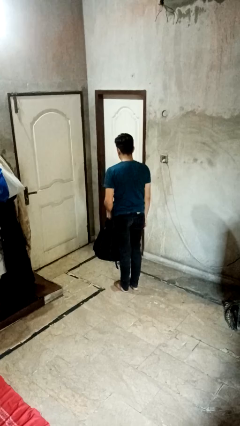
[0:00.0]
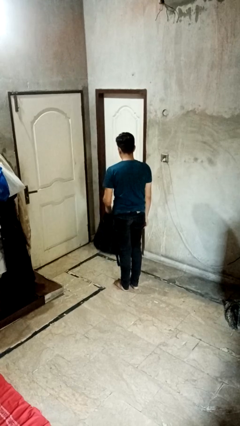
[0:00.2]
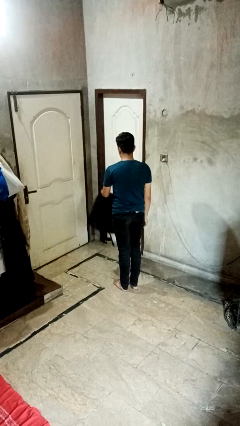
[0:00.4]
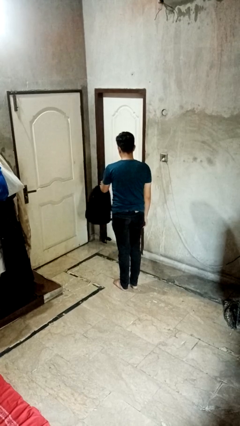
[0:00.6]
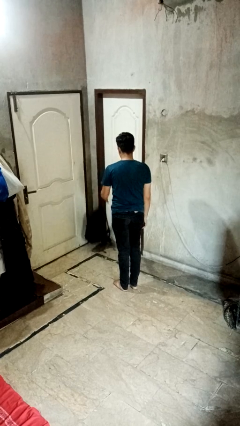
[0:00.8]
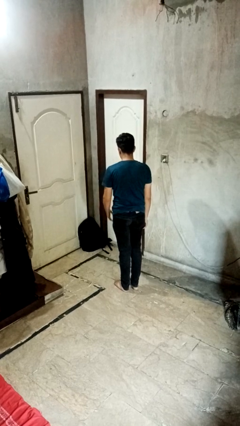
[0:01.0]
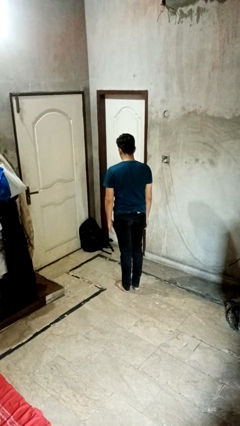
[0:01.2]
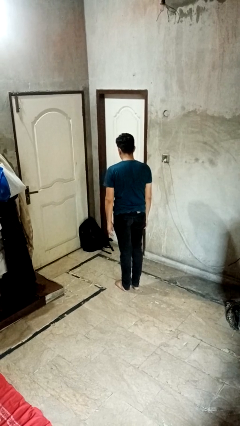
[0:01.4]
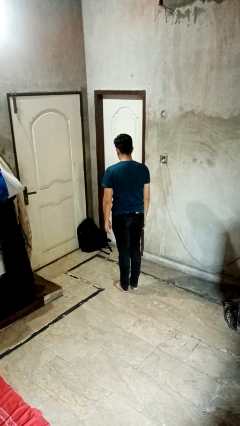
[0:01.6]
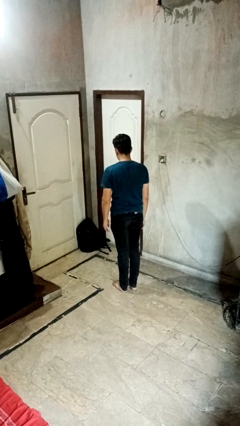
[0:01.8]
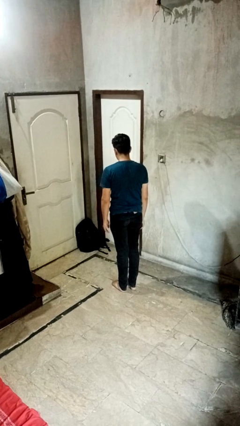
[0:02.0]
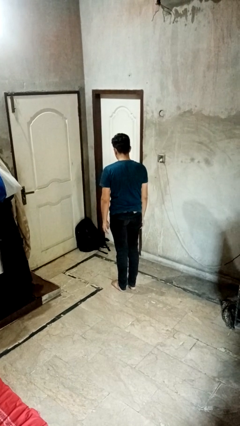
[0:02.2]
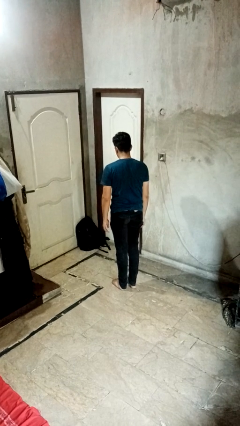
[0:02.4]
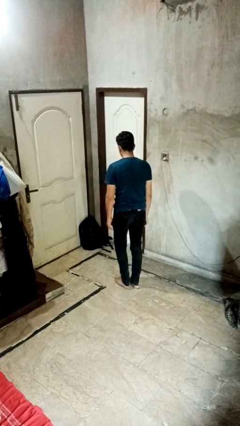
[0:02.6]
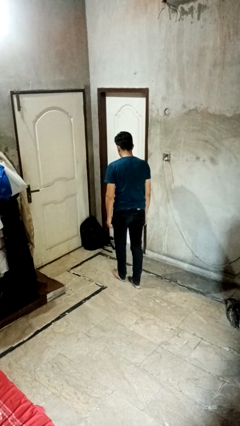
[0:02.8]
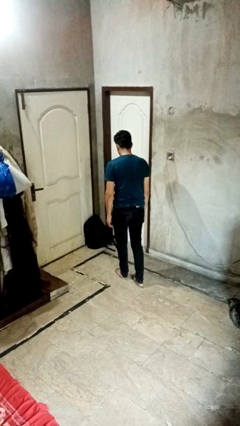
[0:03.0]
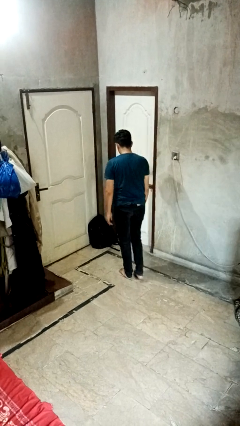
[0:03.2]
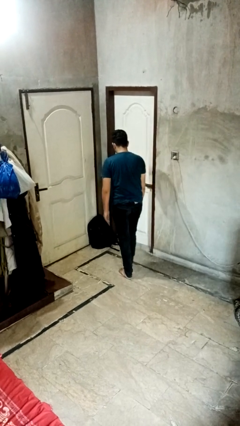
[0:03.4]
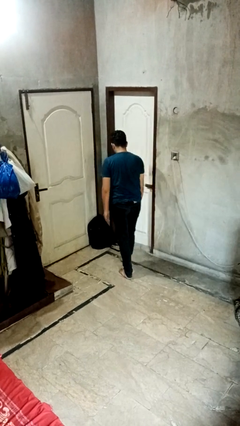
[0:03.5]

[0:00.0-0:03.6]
person throws object to ground

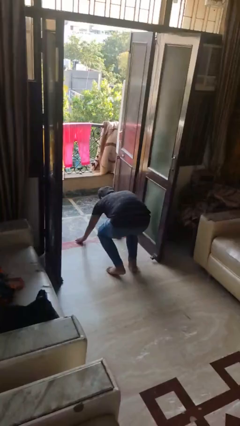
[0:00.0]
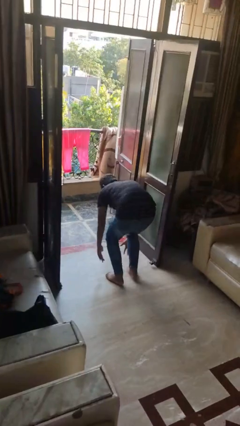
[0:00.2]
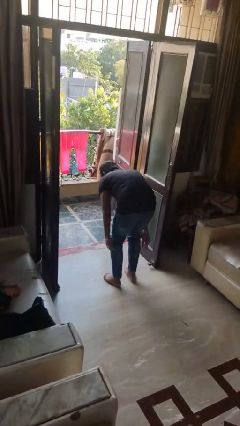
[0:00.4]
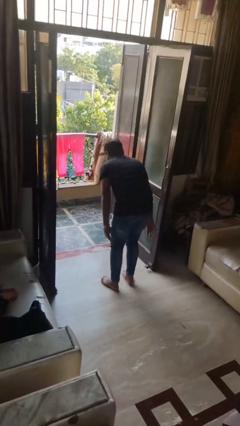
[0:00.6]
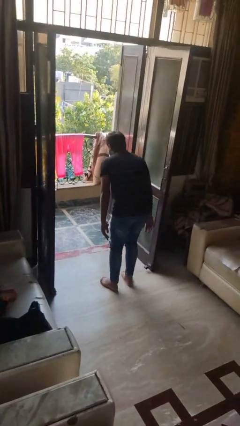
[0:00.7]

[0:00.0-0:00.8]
person stands up from floor

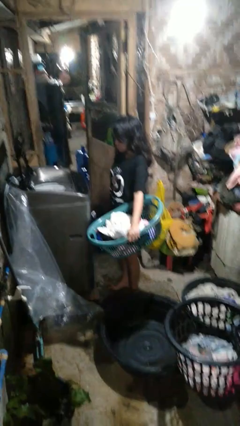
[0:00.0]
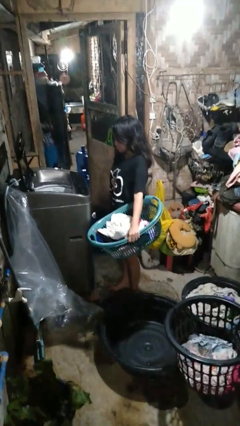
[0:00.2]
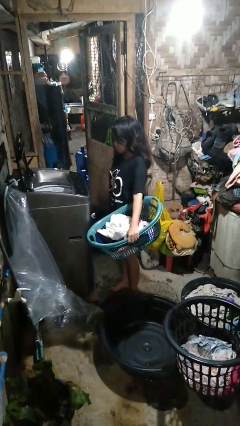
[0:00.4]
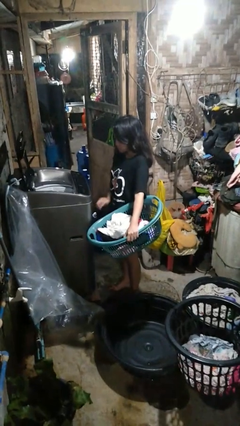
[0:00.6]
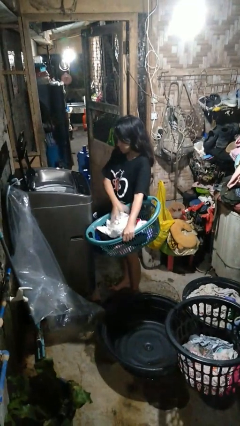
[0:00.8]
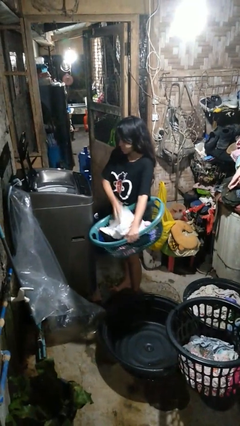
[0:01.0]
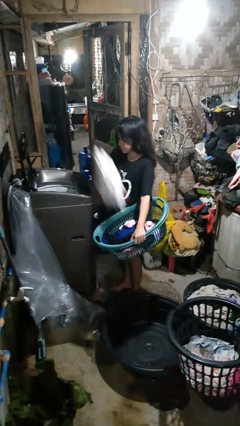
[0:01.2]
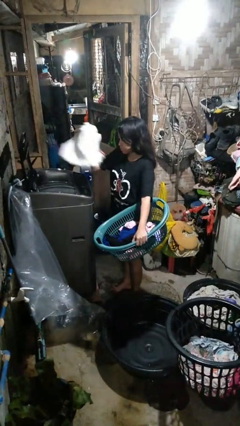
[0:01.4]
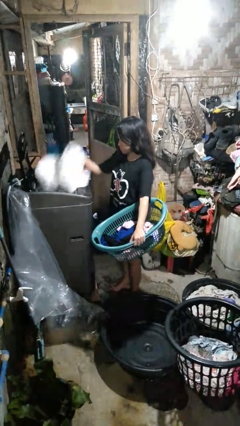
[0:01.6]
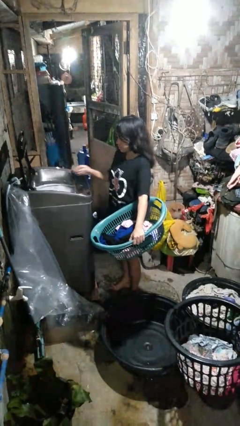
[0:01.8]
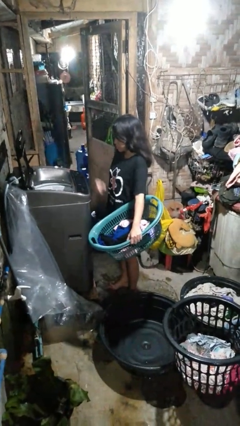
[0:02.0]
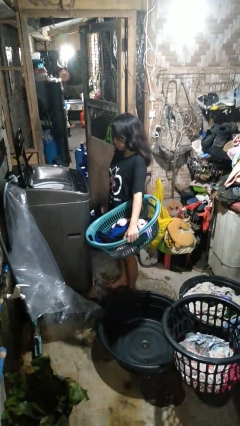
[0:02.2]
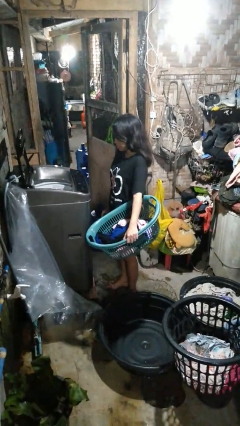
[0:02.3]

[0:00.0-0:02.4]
person loads clotheswasher

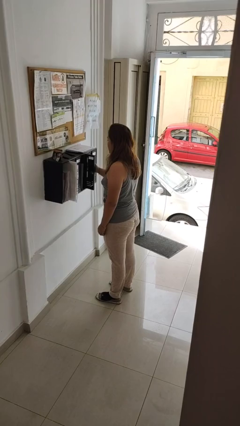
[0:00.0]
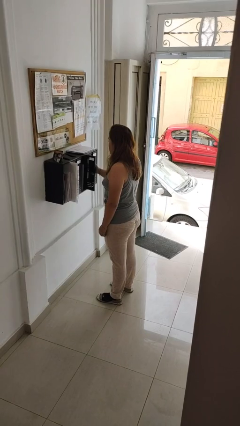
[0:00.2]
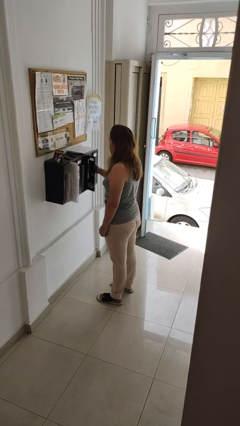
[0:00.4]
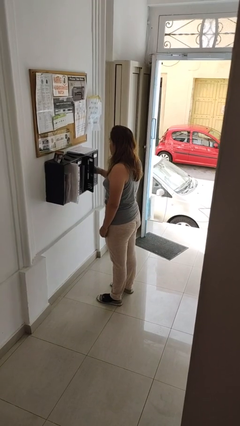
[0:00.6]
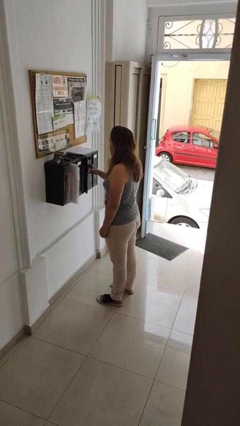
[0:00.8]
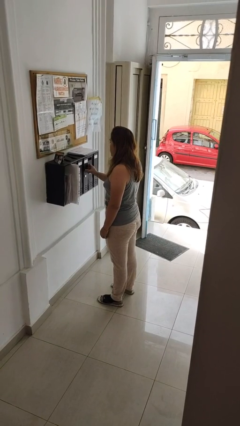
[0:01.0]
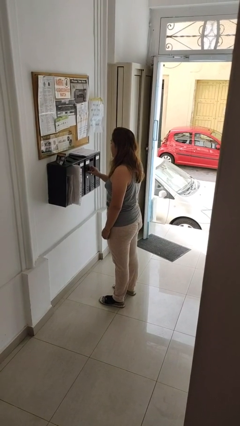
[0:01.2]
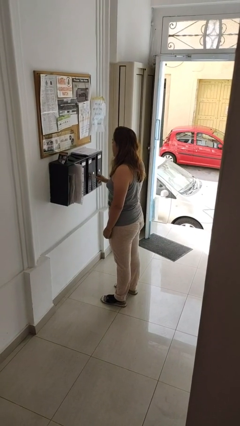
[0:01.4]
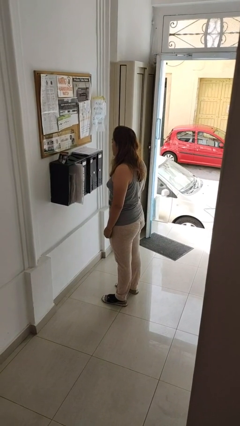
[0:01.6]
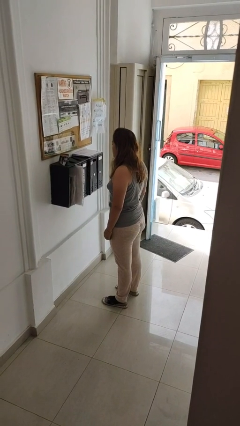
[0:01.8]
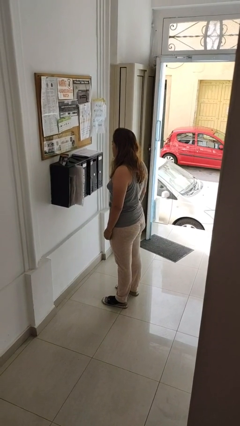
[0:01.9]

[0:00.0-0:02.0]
person closes mailbox

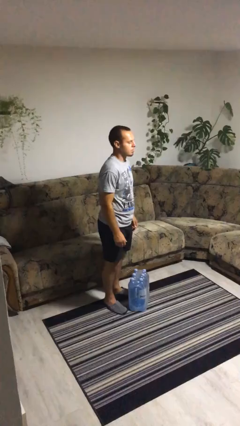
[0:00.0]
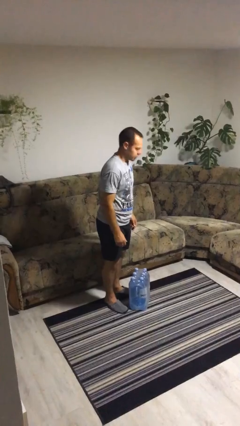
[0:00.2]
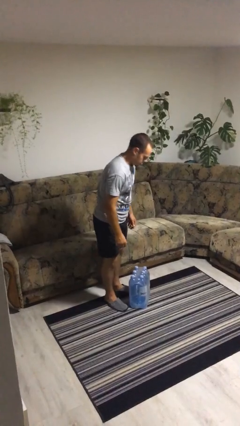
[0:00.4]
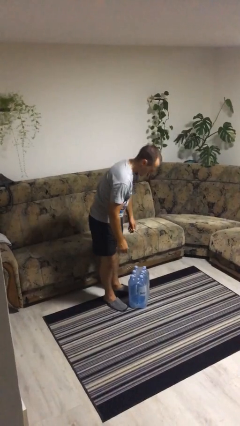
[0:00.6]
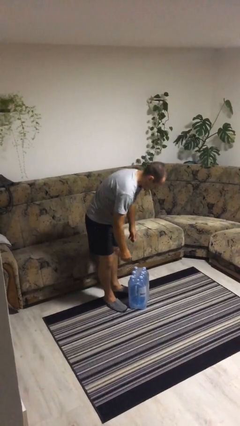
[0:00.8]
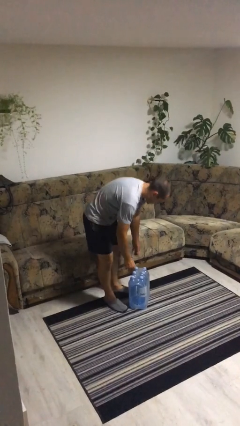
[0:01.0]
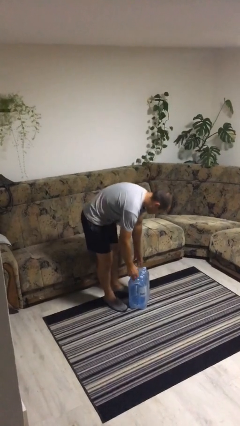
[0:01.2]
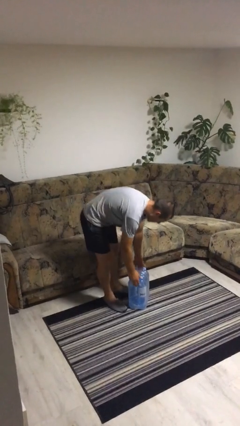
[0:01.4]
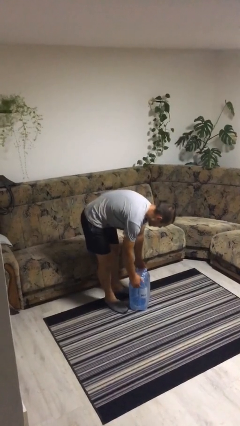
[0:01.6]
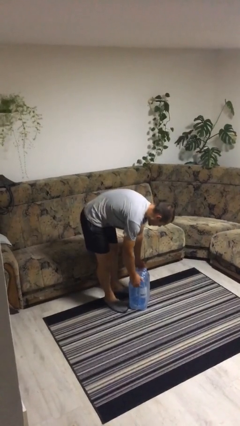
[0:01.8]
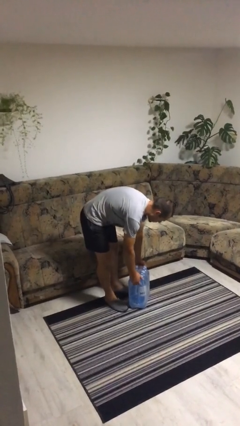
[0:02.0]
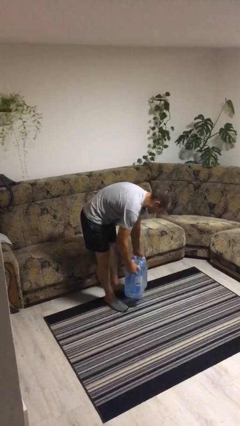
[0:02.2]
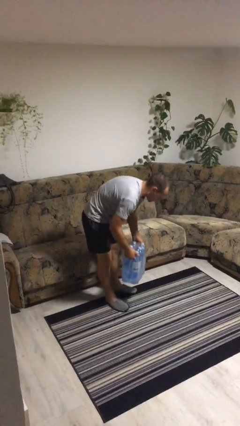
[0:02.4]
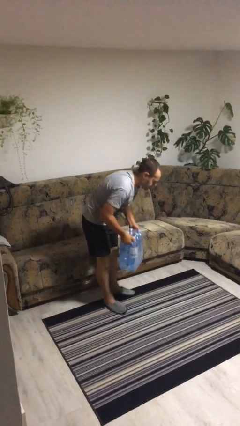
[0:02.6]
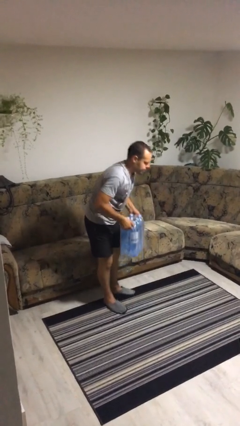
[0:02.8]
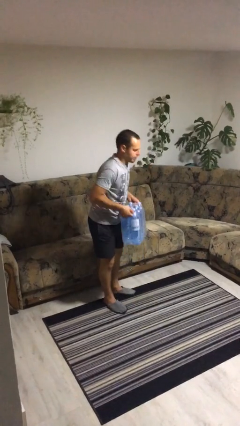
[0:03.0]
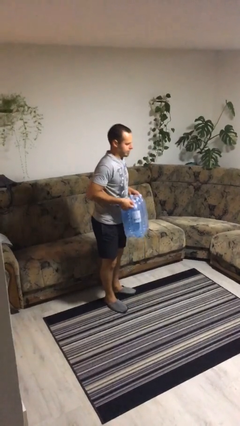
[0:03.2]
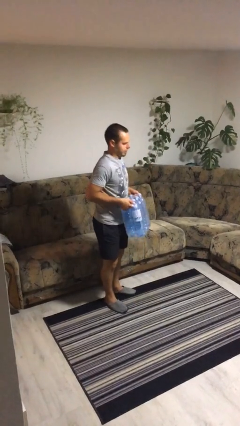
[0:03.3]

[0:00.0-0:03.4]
person picks up object from floor

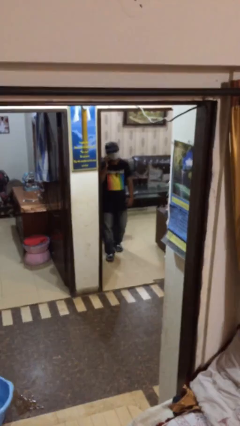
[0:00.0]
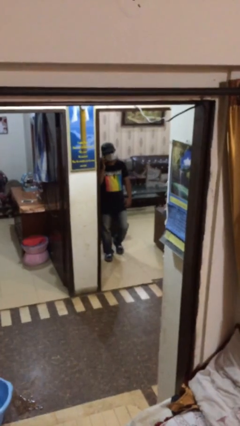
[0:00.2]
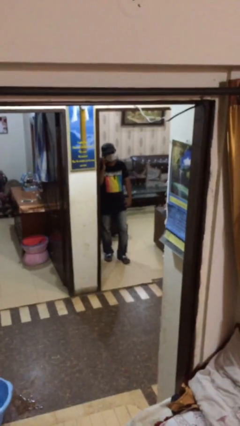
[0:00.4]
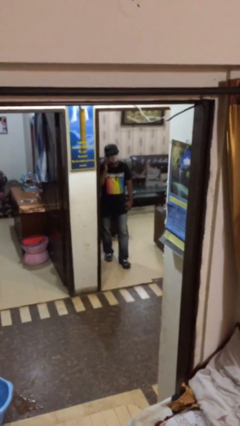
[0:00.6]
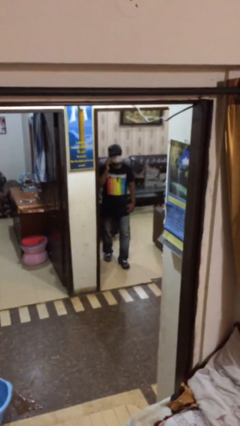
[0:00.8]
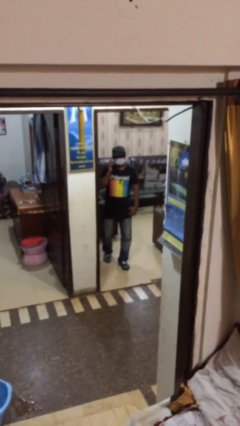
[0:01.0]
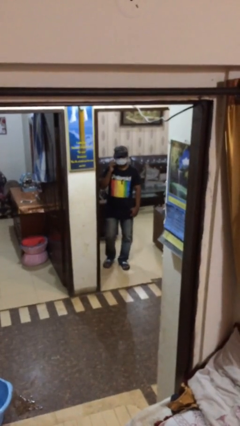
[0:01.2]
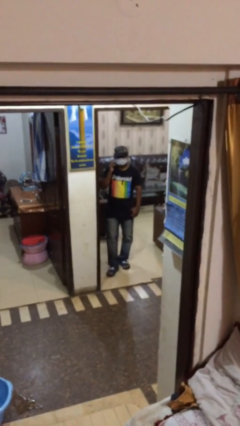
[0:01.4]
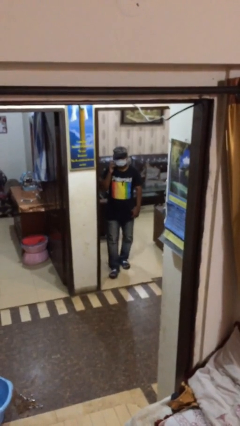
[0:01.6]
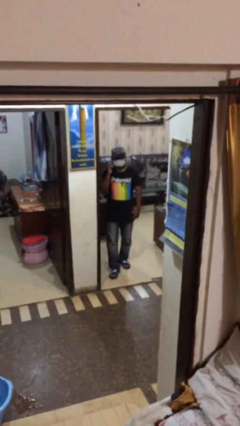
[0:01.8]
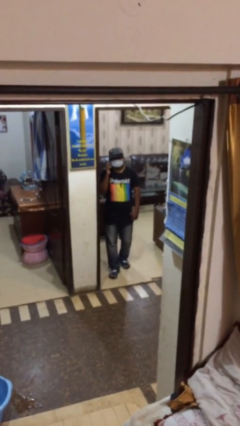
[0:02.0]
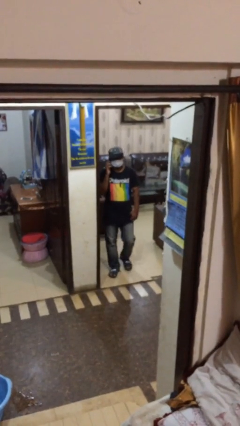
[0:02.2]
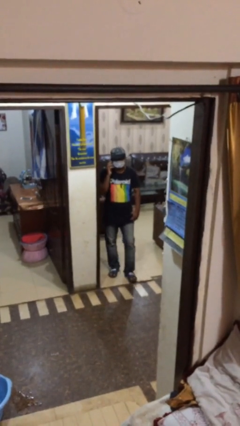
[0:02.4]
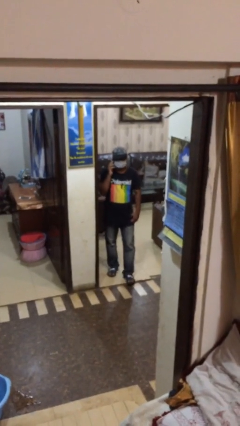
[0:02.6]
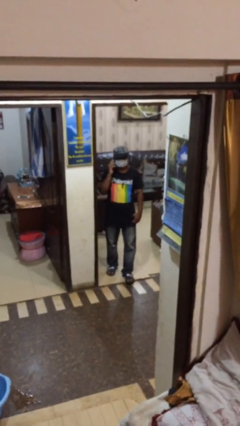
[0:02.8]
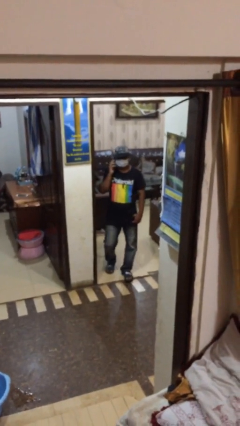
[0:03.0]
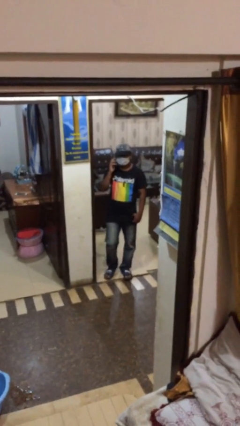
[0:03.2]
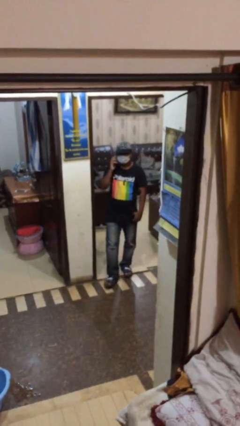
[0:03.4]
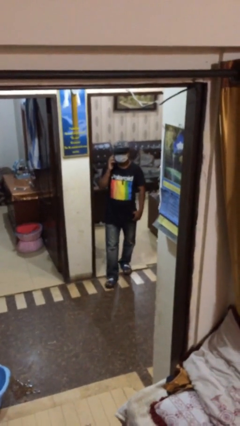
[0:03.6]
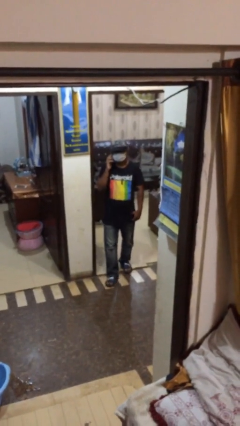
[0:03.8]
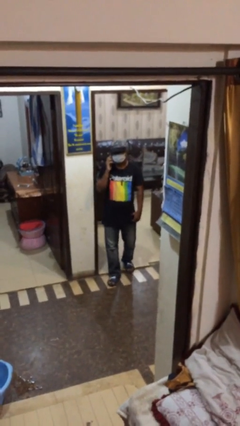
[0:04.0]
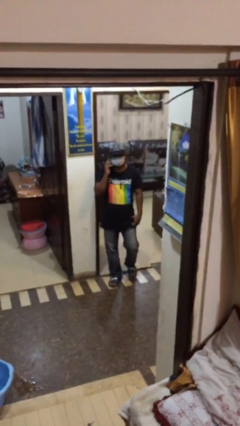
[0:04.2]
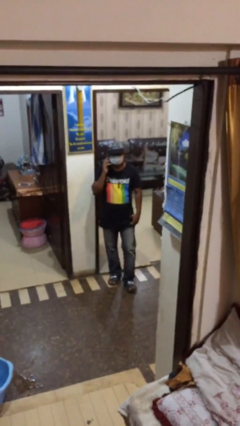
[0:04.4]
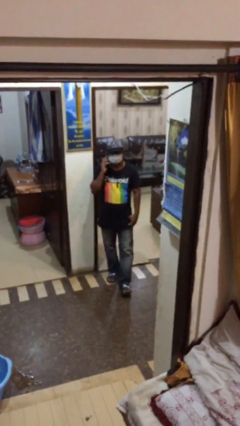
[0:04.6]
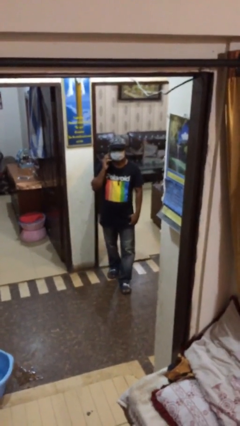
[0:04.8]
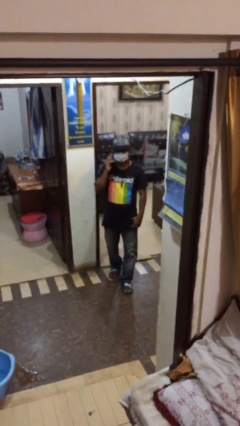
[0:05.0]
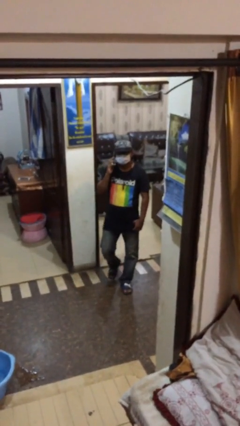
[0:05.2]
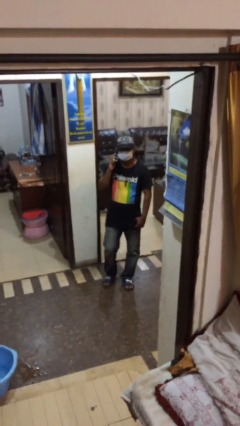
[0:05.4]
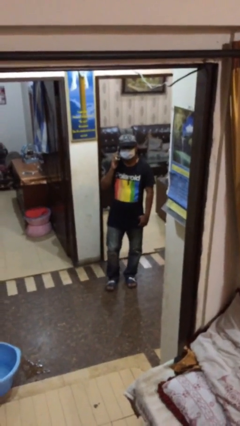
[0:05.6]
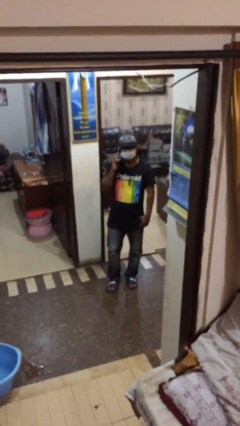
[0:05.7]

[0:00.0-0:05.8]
person enters scene through structure
